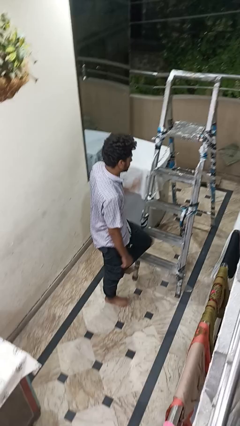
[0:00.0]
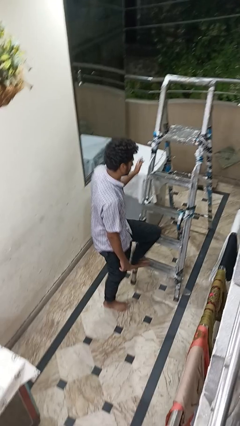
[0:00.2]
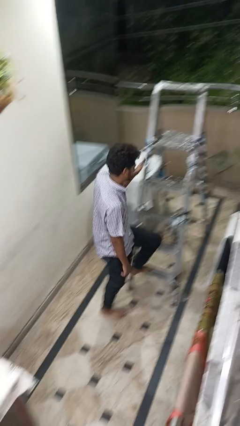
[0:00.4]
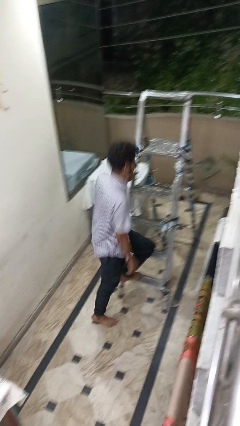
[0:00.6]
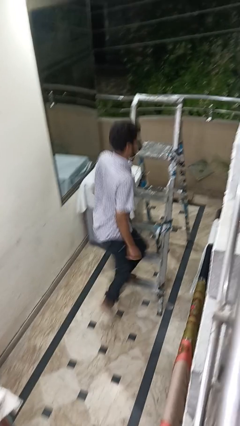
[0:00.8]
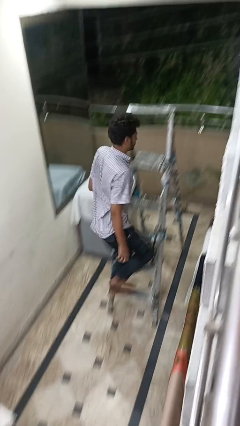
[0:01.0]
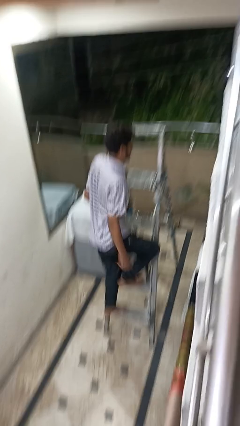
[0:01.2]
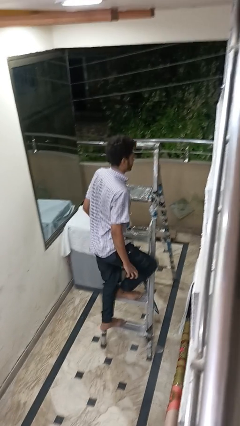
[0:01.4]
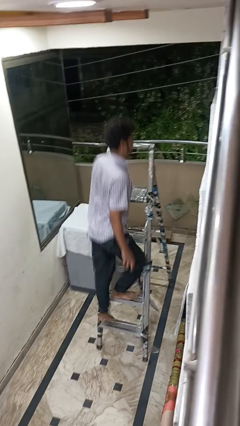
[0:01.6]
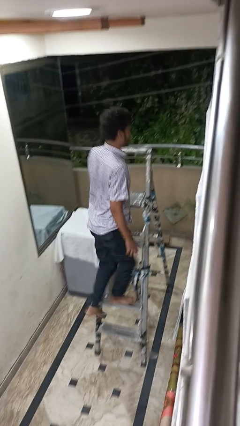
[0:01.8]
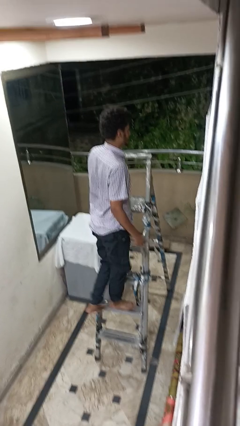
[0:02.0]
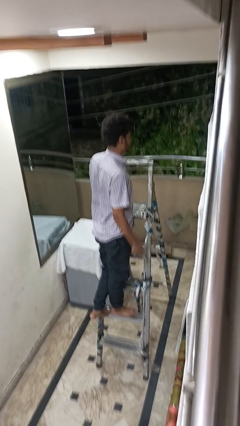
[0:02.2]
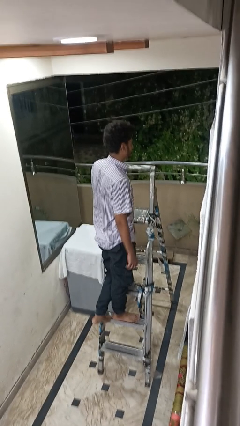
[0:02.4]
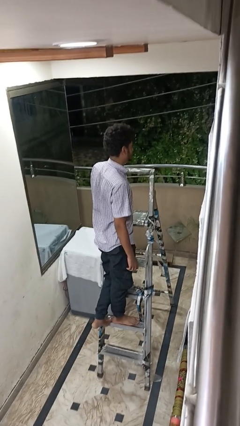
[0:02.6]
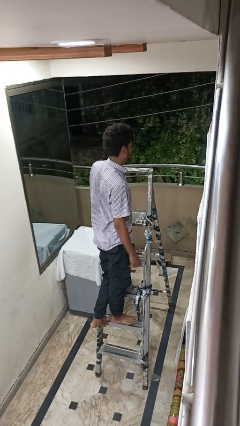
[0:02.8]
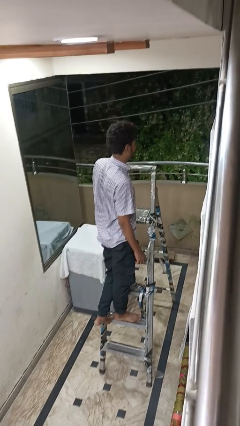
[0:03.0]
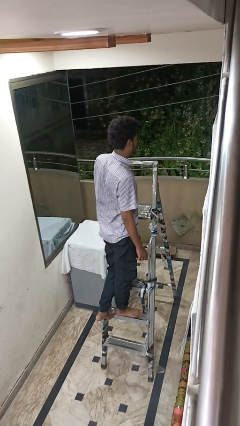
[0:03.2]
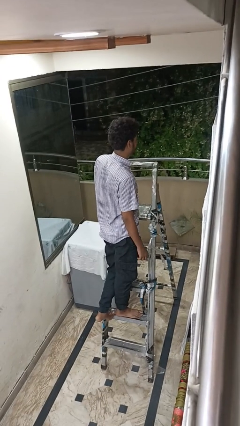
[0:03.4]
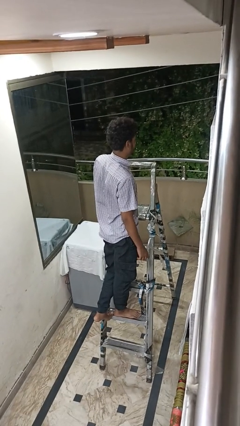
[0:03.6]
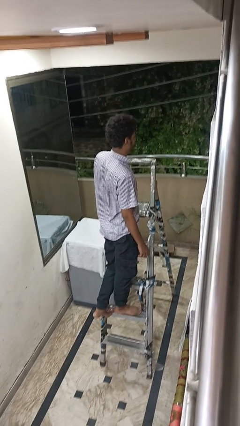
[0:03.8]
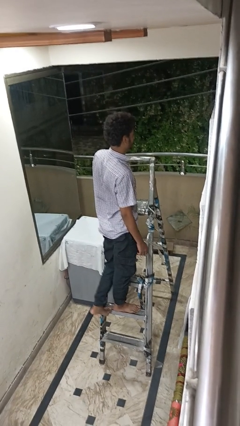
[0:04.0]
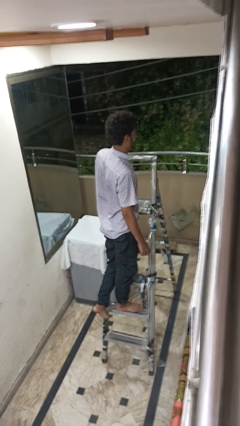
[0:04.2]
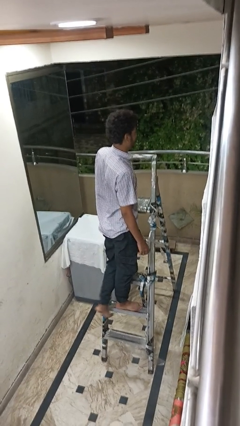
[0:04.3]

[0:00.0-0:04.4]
person climbs up ladder

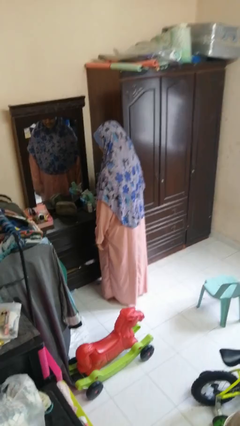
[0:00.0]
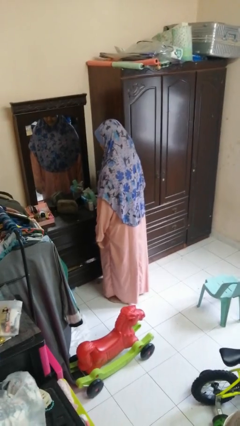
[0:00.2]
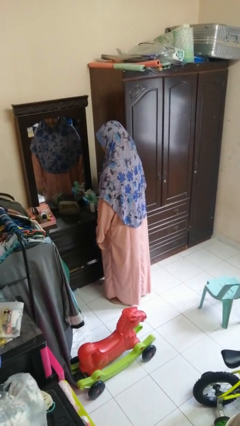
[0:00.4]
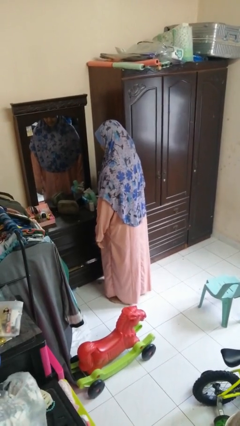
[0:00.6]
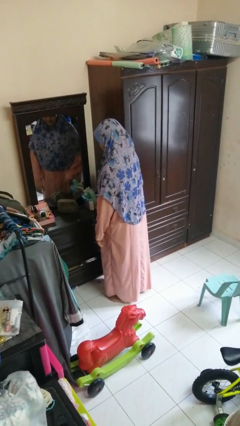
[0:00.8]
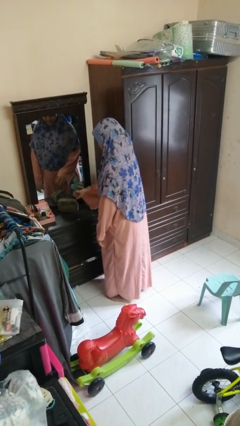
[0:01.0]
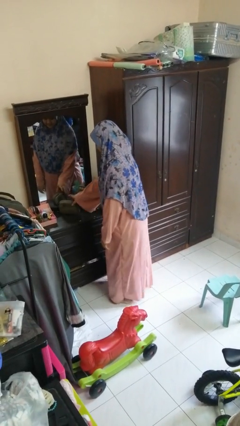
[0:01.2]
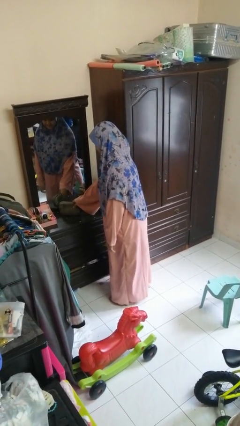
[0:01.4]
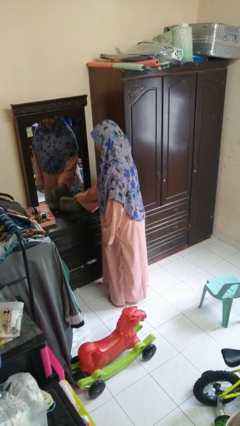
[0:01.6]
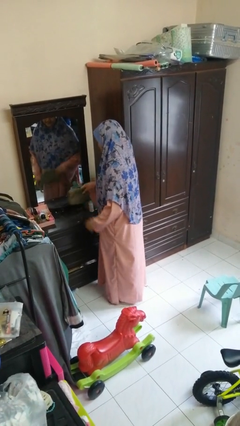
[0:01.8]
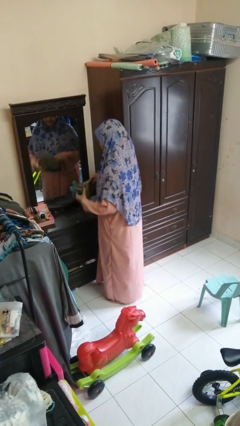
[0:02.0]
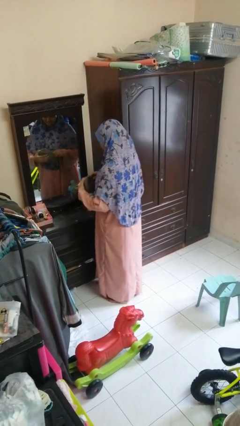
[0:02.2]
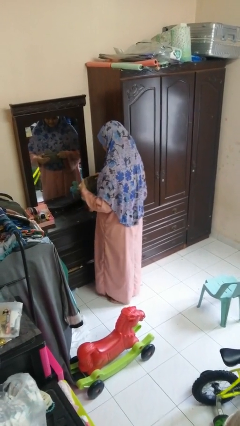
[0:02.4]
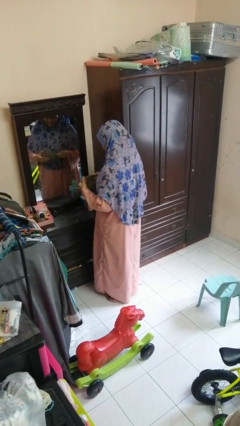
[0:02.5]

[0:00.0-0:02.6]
person picks up object from countertop

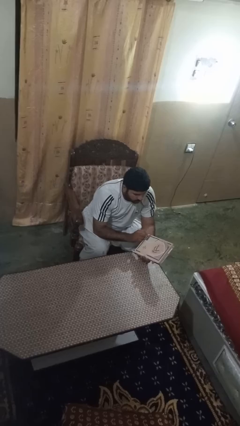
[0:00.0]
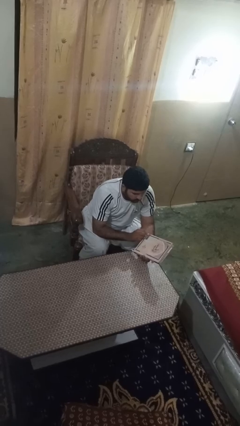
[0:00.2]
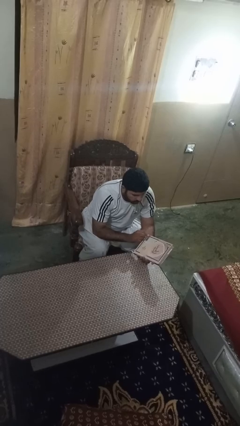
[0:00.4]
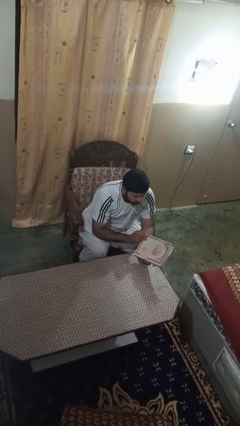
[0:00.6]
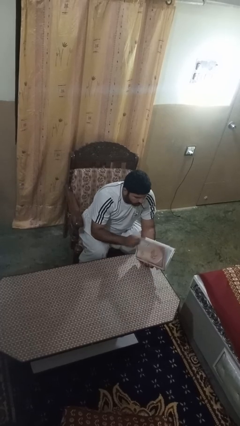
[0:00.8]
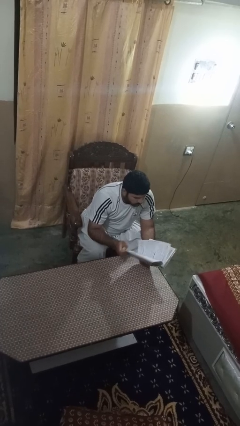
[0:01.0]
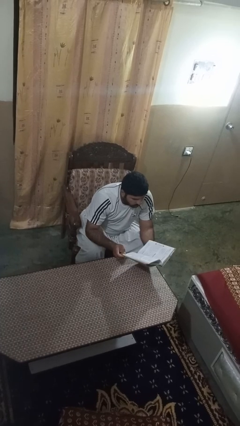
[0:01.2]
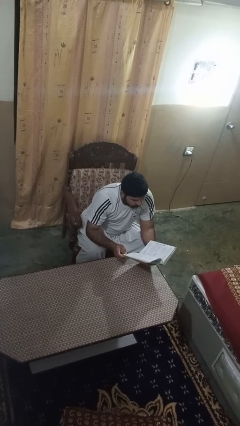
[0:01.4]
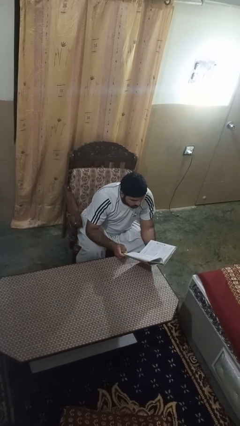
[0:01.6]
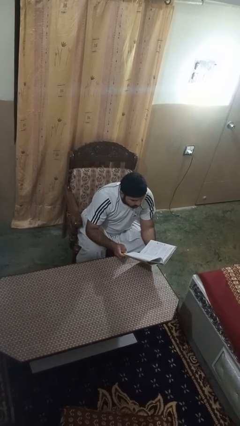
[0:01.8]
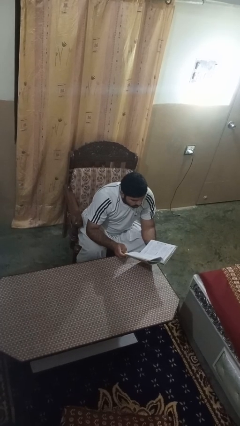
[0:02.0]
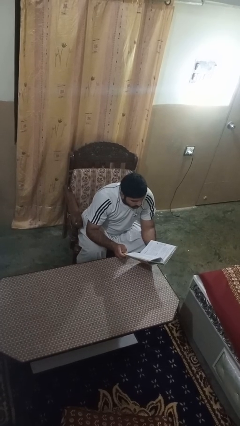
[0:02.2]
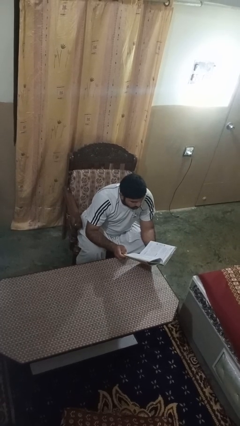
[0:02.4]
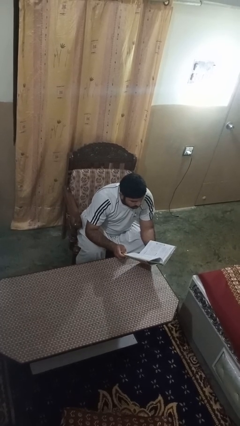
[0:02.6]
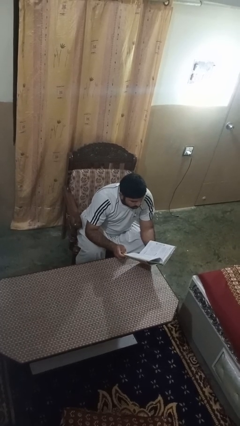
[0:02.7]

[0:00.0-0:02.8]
person reads book

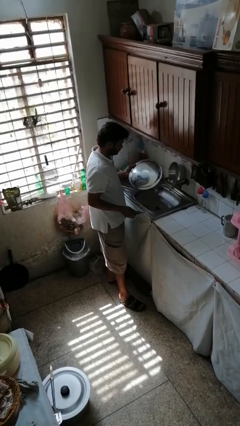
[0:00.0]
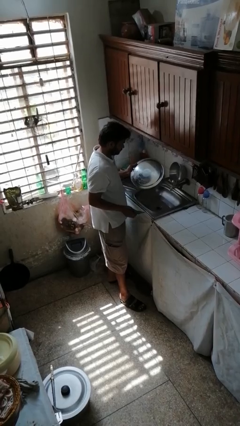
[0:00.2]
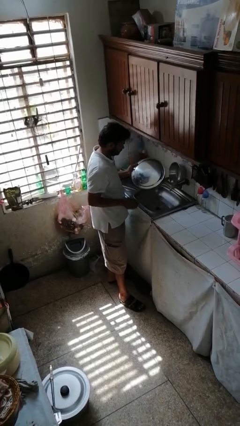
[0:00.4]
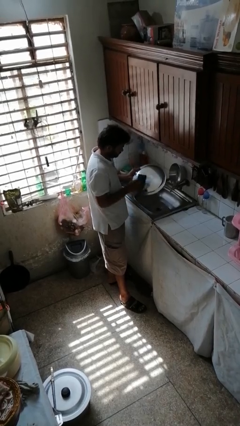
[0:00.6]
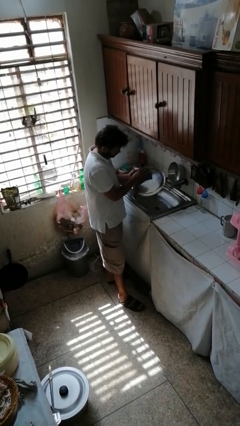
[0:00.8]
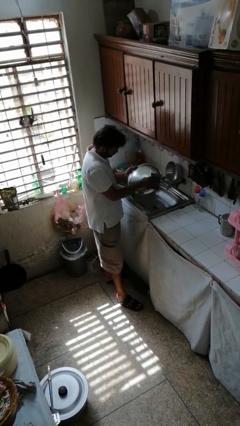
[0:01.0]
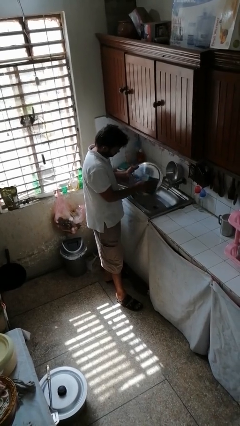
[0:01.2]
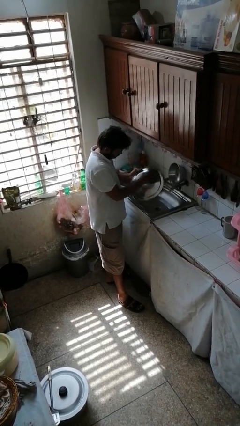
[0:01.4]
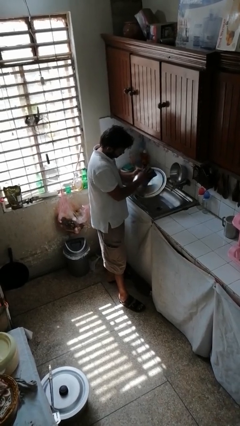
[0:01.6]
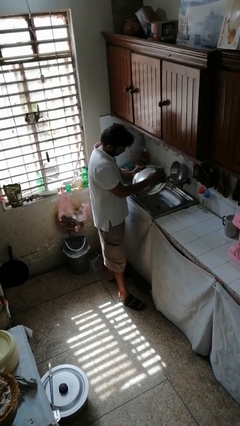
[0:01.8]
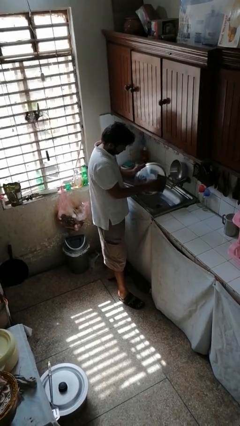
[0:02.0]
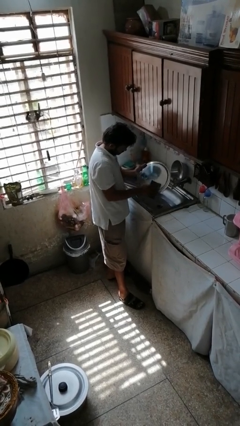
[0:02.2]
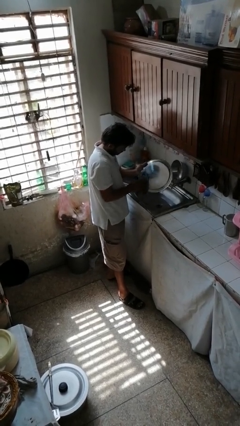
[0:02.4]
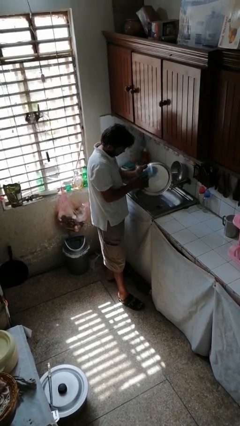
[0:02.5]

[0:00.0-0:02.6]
person washes dish

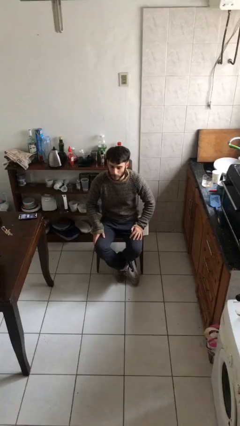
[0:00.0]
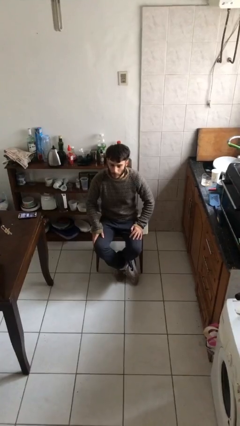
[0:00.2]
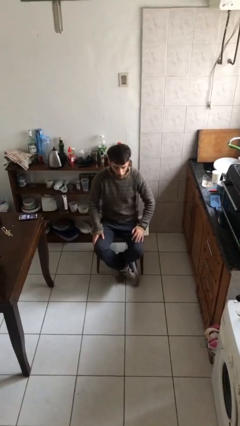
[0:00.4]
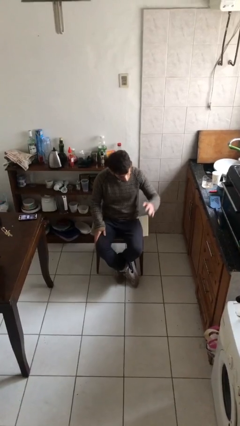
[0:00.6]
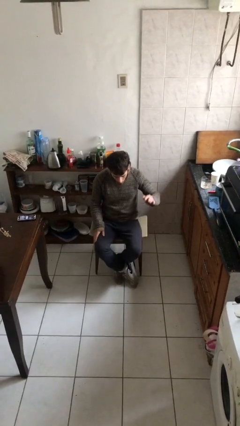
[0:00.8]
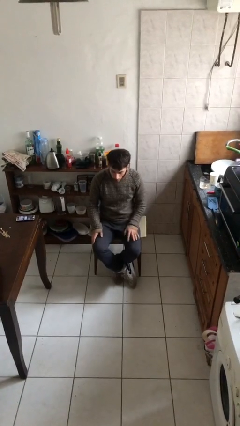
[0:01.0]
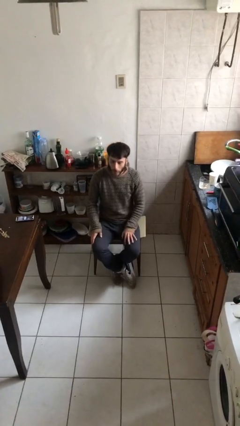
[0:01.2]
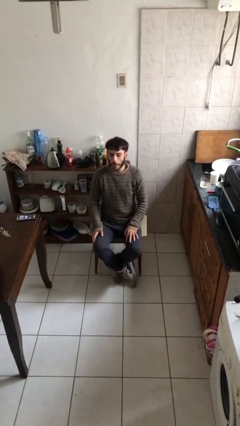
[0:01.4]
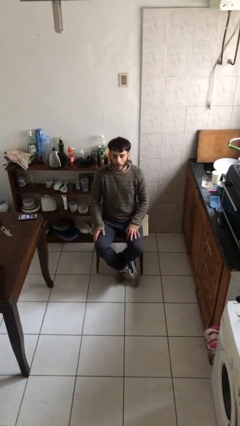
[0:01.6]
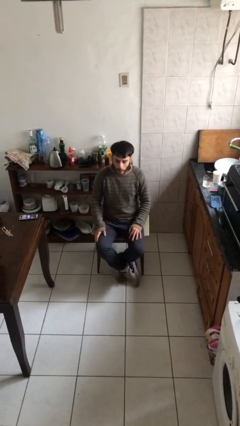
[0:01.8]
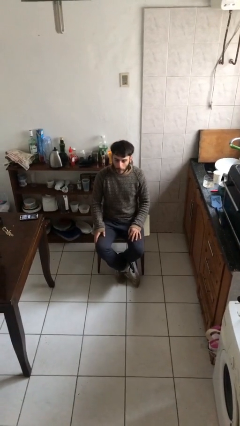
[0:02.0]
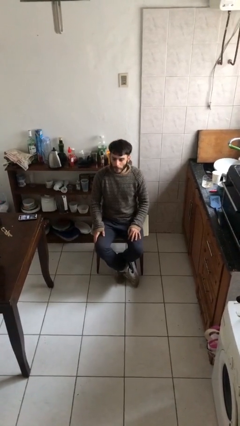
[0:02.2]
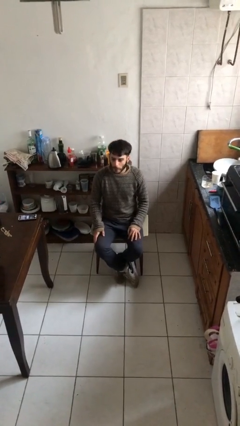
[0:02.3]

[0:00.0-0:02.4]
person slaps hands on thighs

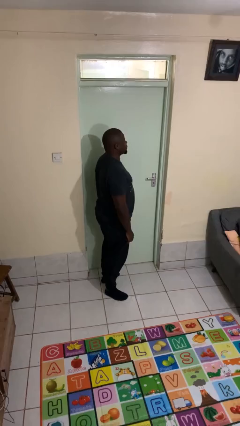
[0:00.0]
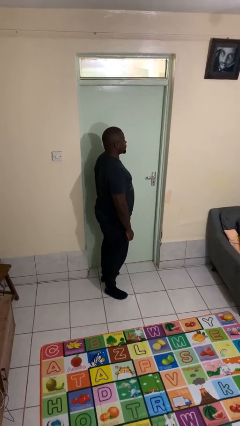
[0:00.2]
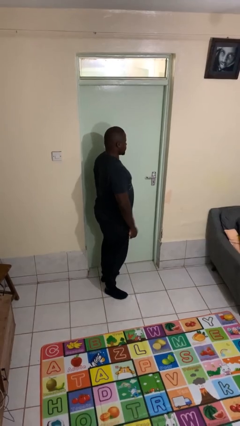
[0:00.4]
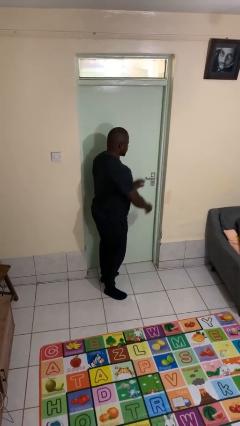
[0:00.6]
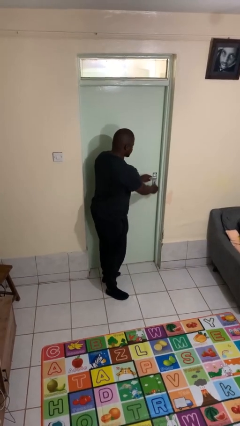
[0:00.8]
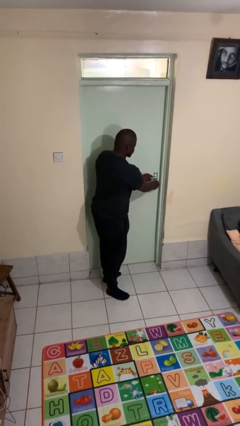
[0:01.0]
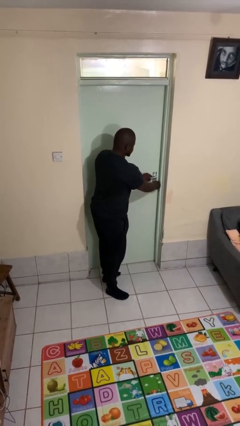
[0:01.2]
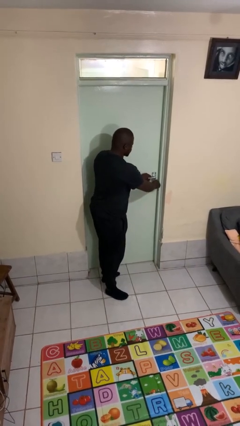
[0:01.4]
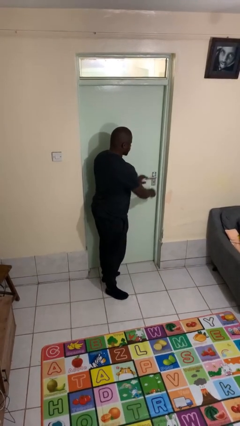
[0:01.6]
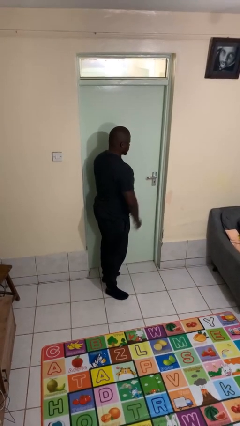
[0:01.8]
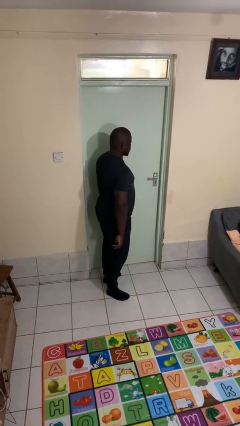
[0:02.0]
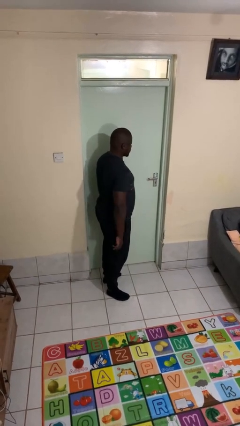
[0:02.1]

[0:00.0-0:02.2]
person unlocks door with keys
